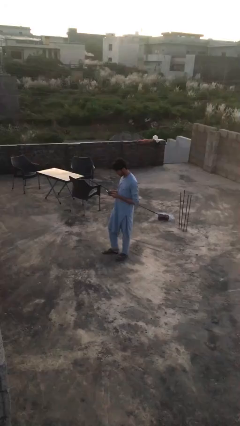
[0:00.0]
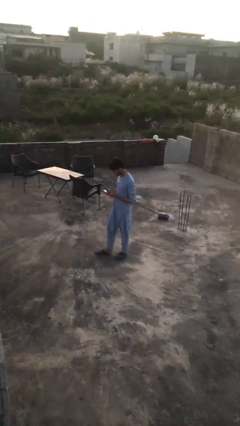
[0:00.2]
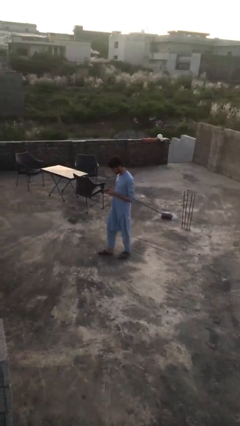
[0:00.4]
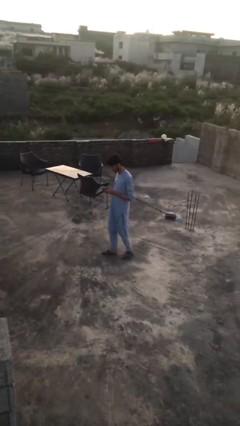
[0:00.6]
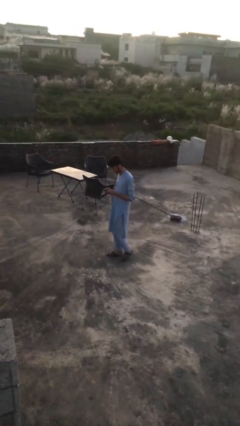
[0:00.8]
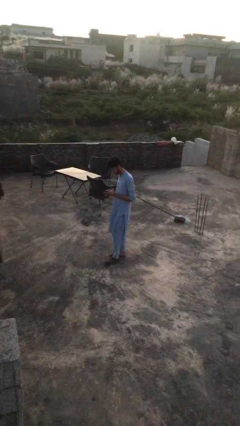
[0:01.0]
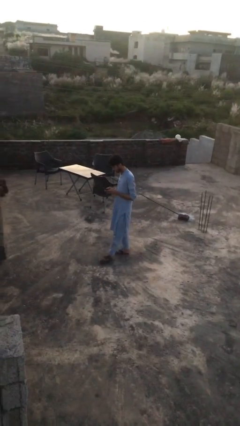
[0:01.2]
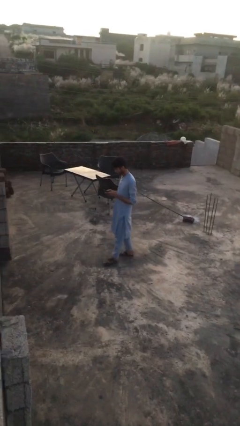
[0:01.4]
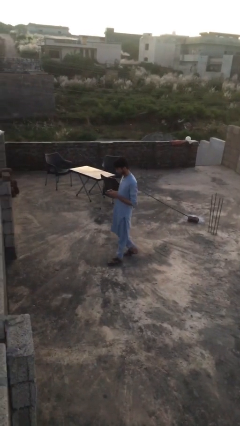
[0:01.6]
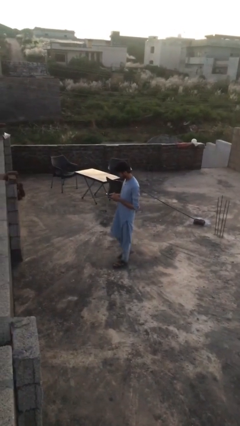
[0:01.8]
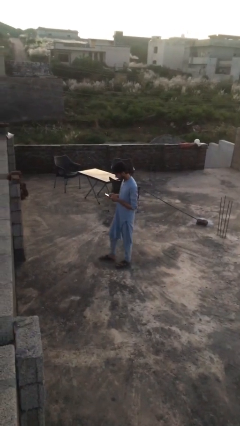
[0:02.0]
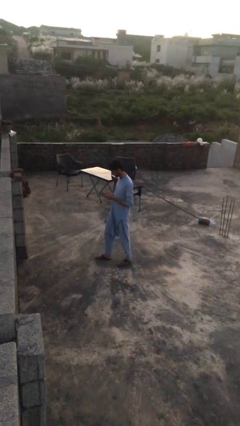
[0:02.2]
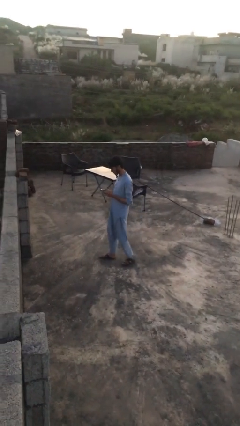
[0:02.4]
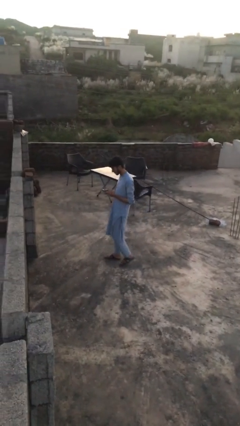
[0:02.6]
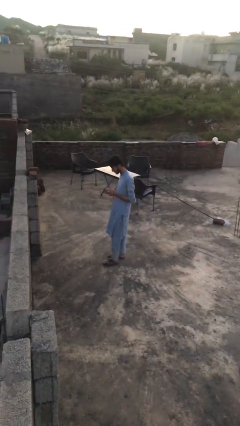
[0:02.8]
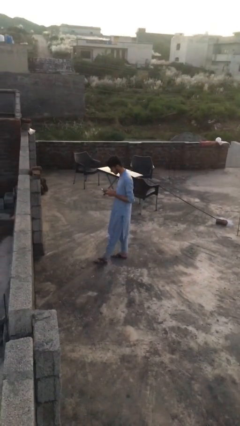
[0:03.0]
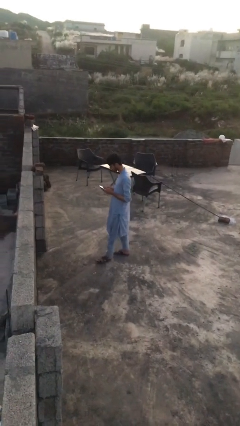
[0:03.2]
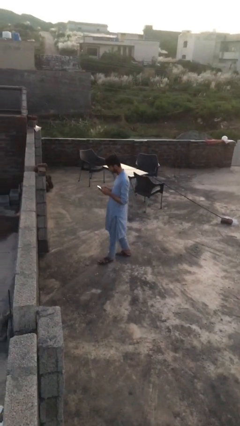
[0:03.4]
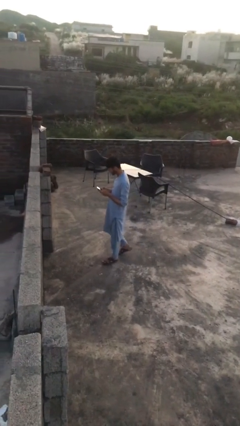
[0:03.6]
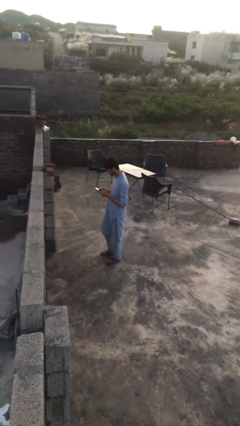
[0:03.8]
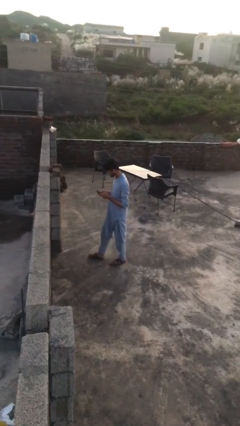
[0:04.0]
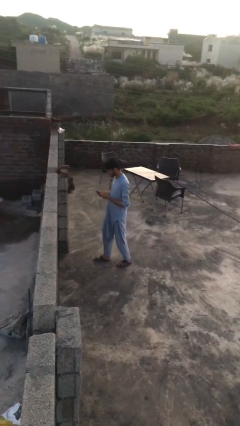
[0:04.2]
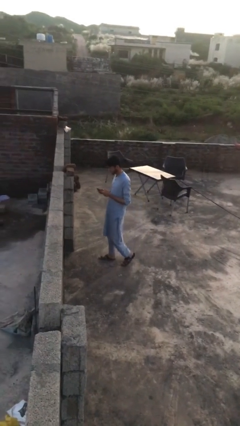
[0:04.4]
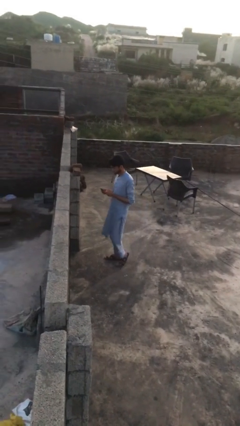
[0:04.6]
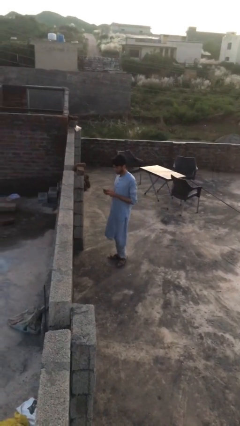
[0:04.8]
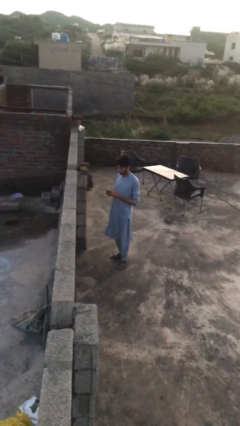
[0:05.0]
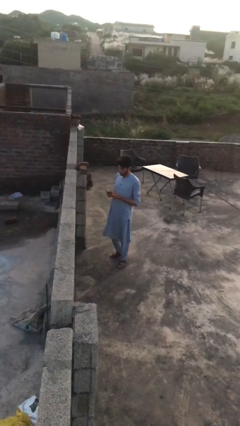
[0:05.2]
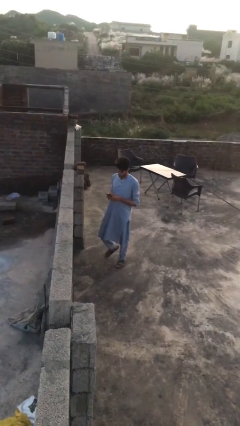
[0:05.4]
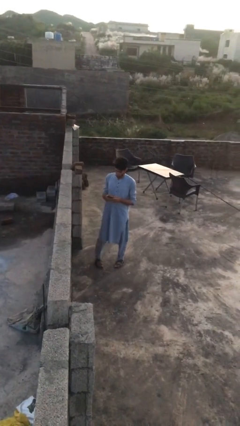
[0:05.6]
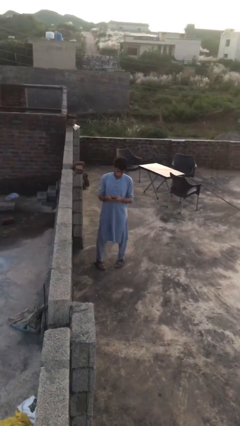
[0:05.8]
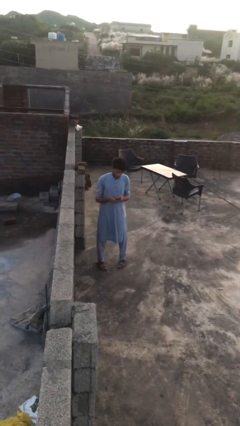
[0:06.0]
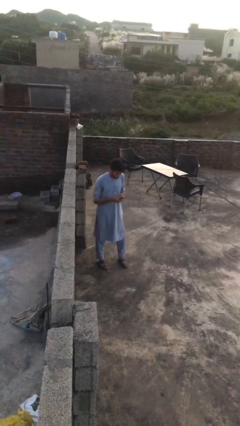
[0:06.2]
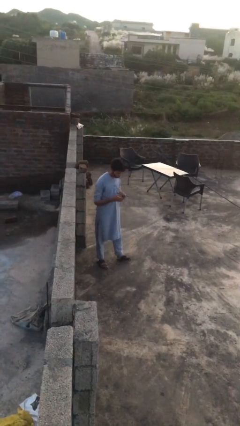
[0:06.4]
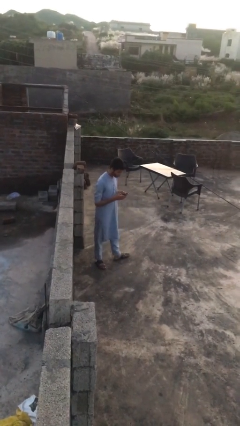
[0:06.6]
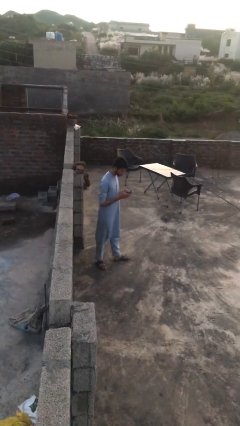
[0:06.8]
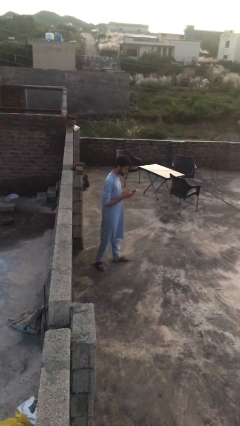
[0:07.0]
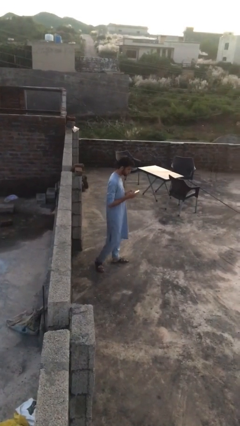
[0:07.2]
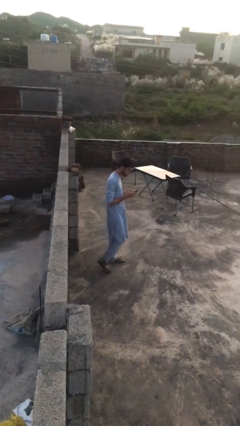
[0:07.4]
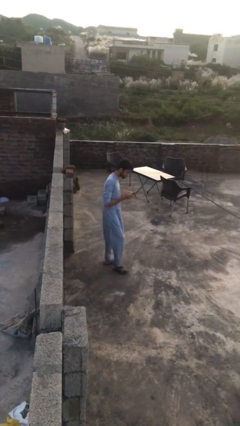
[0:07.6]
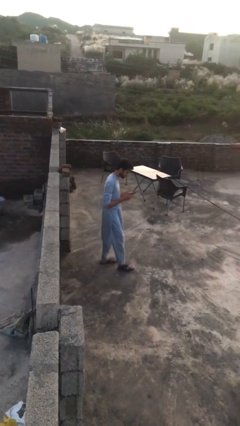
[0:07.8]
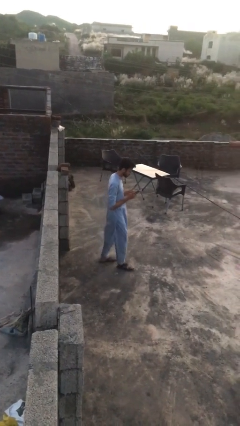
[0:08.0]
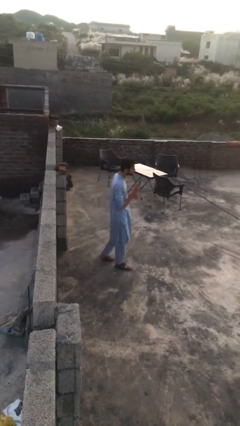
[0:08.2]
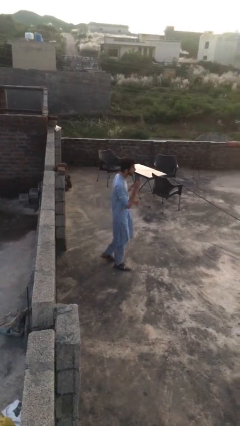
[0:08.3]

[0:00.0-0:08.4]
person texts on phone

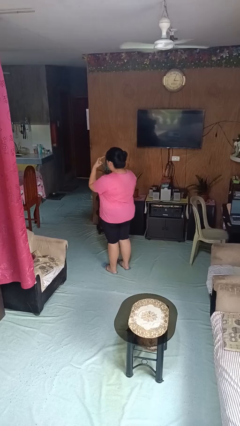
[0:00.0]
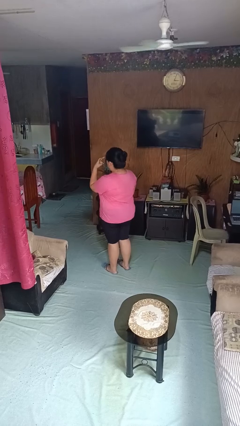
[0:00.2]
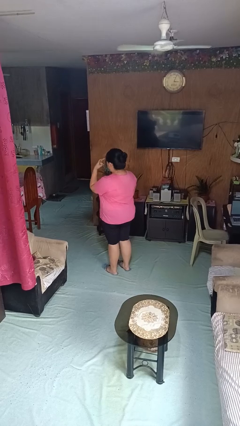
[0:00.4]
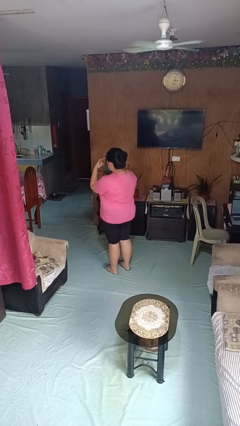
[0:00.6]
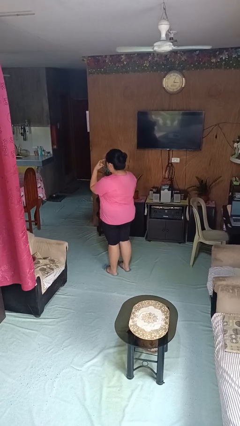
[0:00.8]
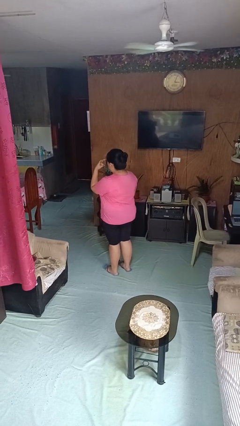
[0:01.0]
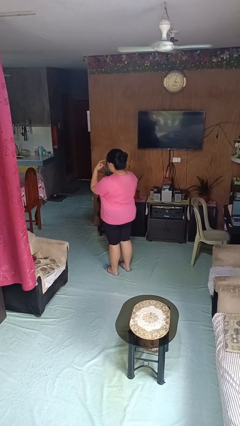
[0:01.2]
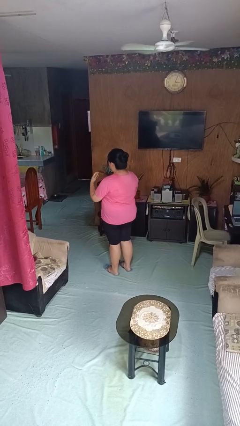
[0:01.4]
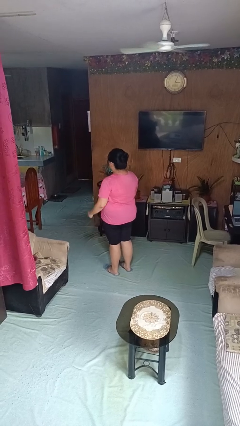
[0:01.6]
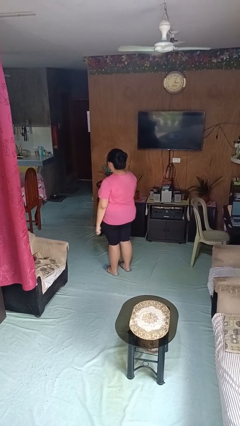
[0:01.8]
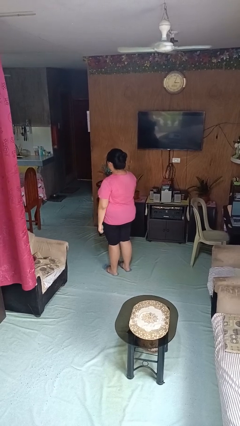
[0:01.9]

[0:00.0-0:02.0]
person gestures watch closely

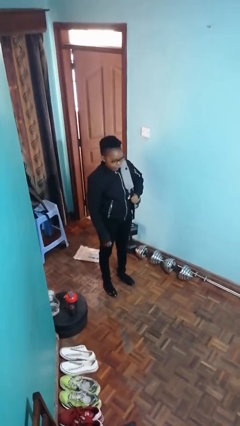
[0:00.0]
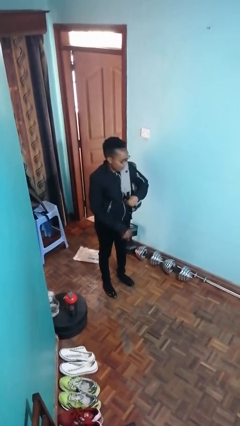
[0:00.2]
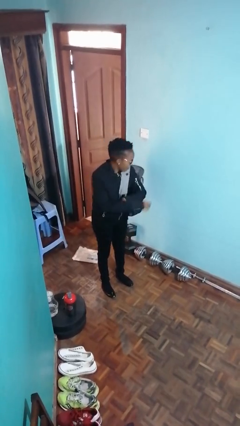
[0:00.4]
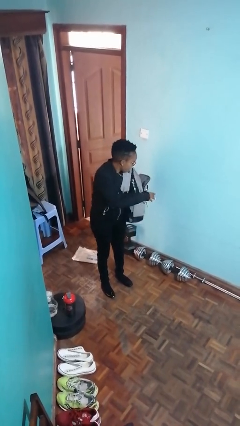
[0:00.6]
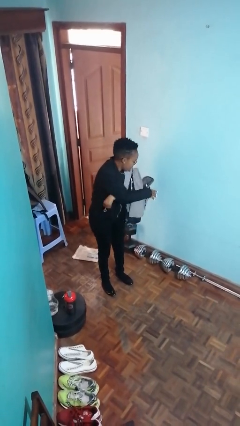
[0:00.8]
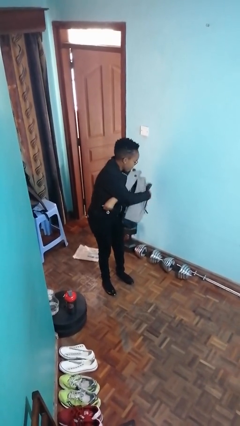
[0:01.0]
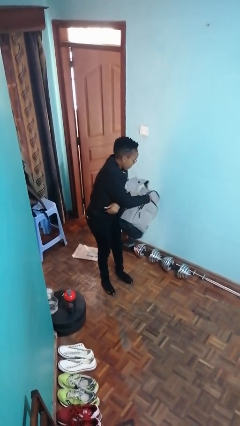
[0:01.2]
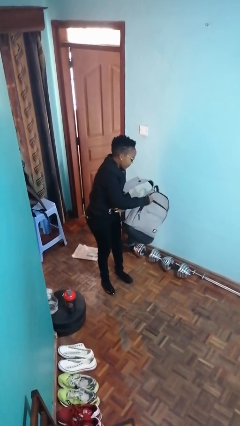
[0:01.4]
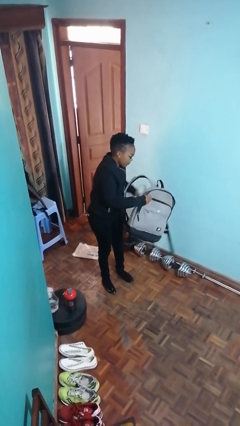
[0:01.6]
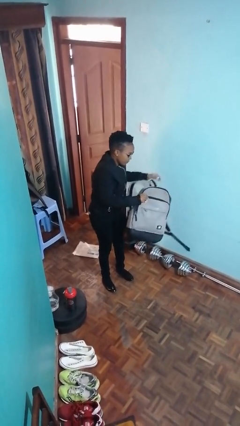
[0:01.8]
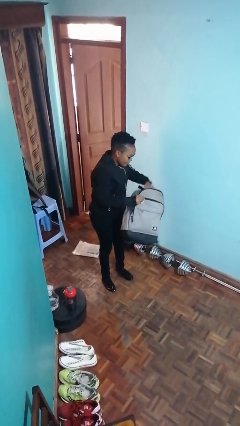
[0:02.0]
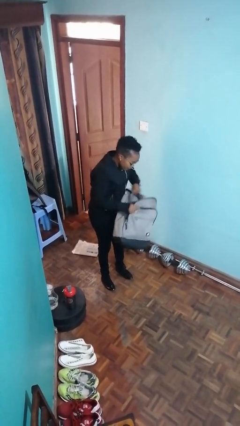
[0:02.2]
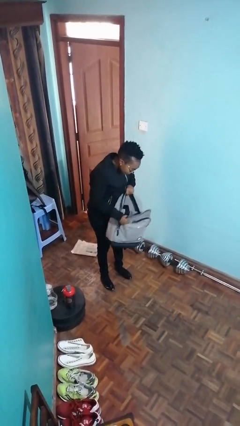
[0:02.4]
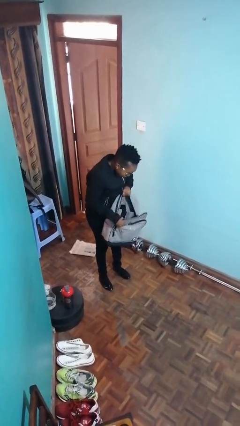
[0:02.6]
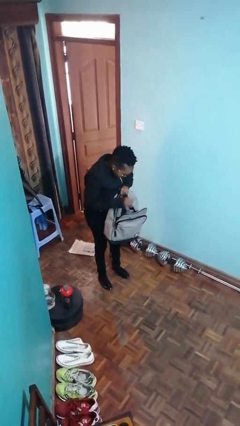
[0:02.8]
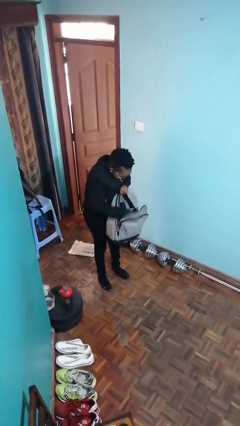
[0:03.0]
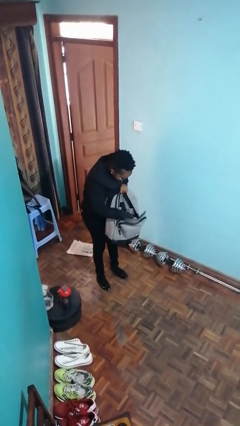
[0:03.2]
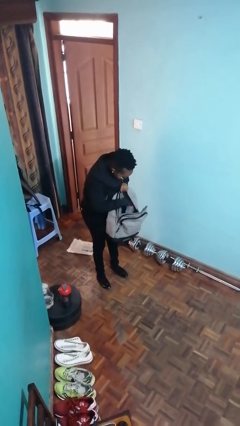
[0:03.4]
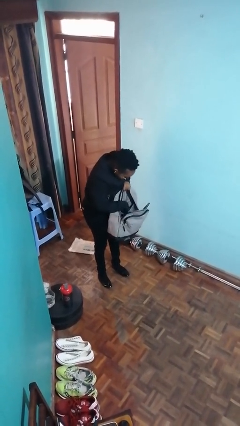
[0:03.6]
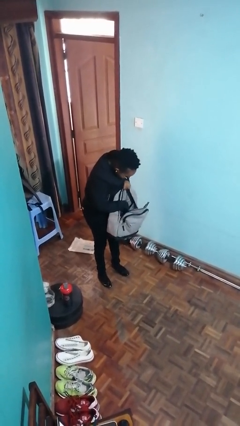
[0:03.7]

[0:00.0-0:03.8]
person searches in backpack

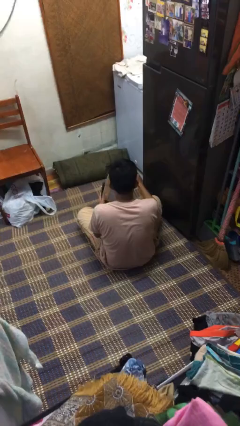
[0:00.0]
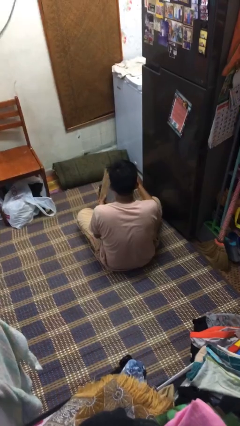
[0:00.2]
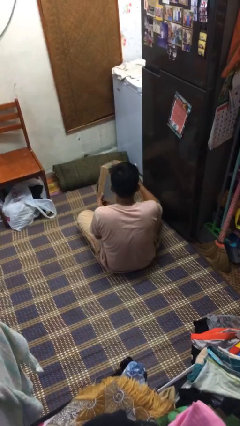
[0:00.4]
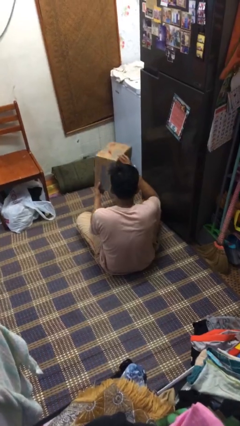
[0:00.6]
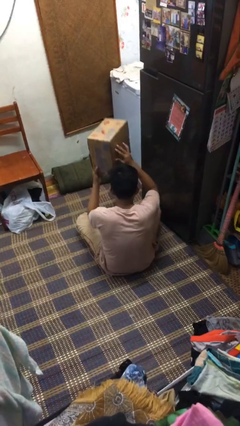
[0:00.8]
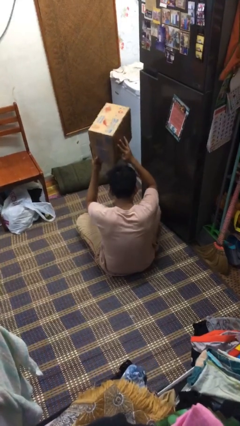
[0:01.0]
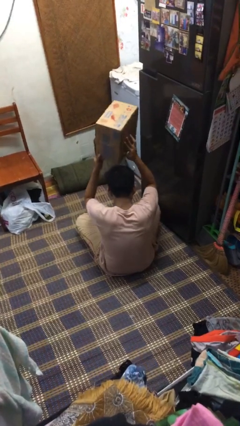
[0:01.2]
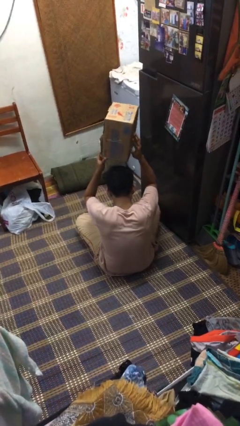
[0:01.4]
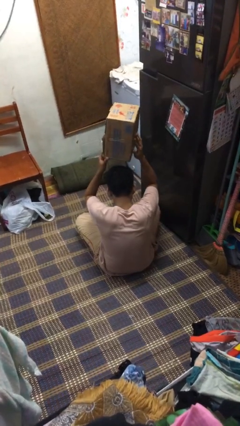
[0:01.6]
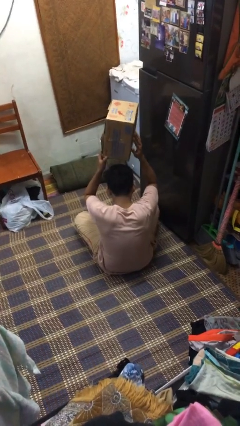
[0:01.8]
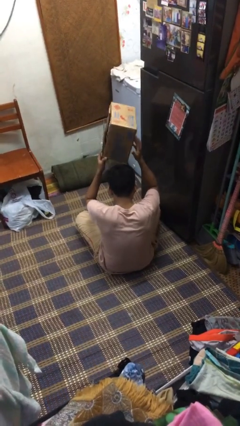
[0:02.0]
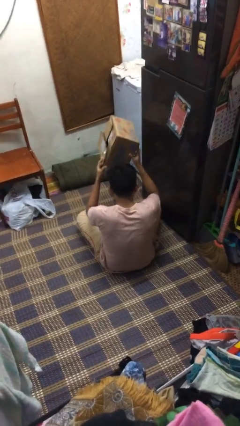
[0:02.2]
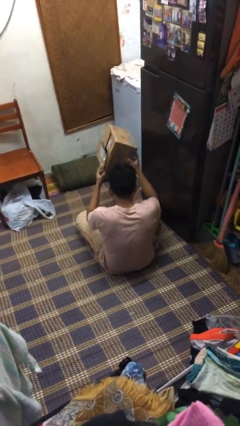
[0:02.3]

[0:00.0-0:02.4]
person holds object above head

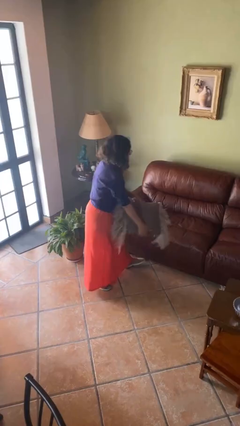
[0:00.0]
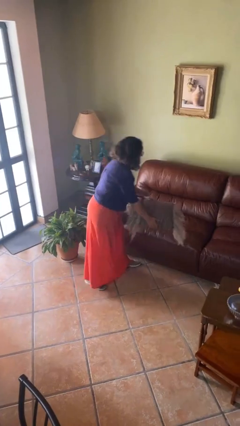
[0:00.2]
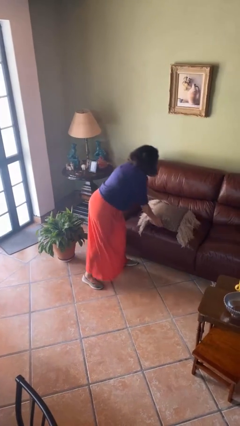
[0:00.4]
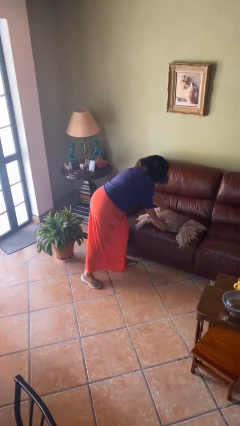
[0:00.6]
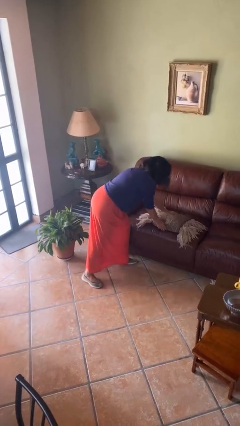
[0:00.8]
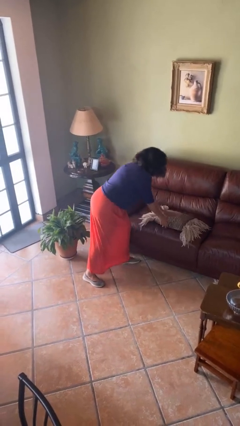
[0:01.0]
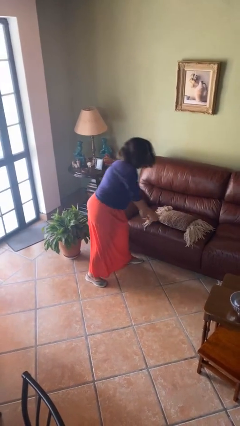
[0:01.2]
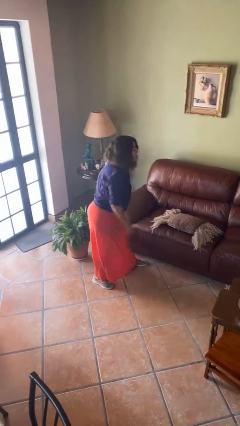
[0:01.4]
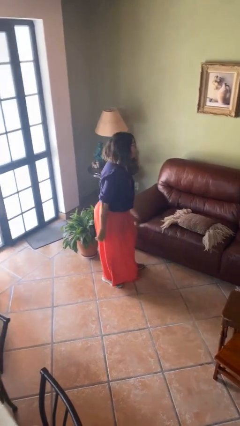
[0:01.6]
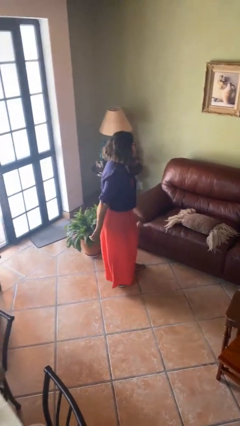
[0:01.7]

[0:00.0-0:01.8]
person puts down object on couch
